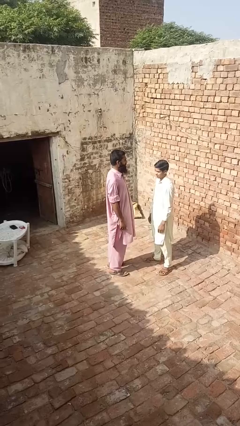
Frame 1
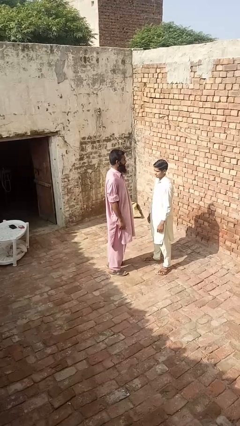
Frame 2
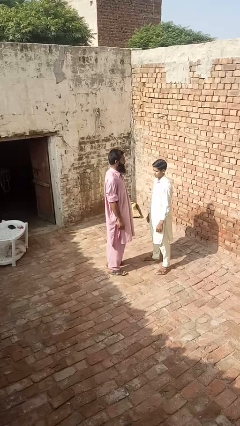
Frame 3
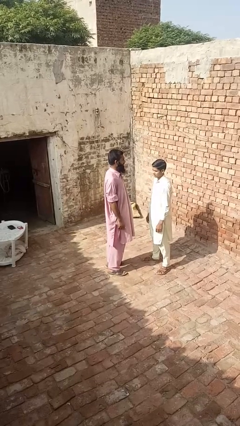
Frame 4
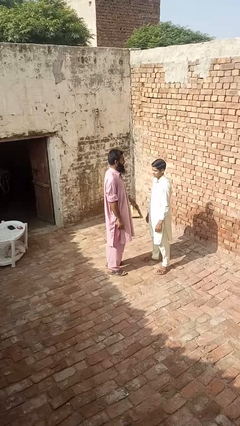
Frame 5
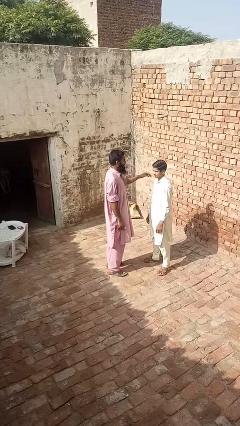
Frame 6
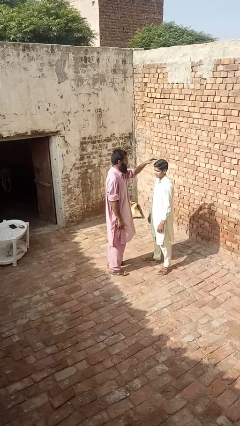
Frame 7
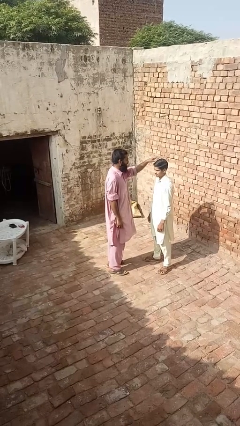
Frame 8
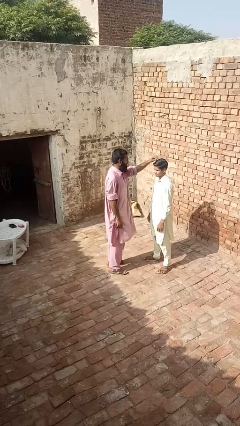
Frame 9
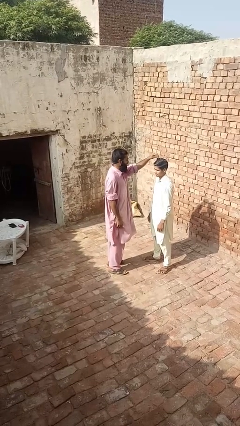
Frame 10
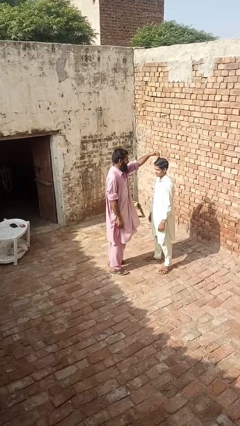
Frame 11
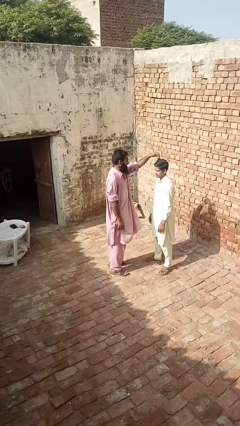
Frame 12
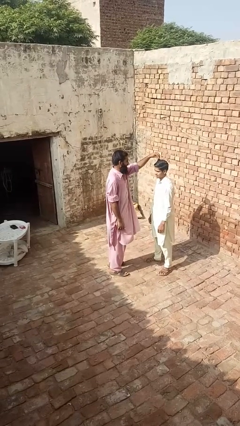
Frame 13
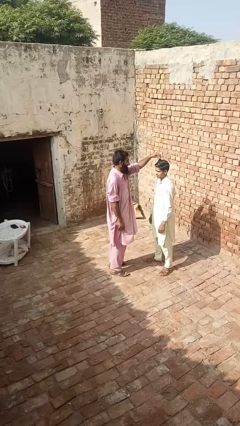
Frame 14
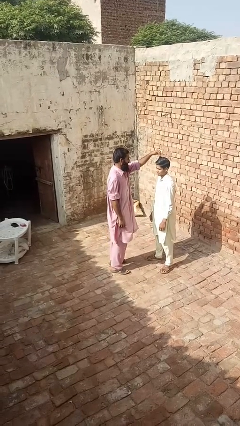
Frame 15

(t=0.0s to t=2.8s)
person grabs person by hair

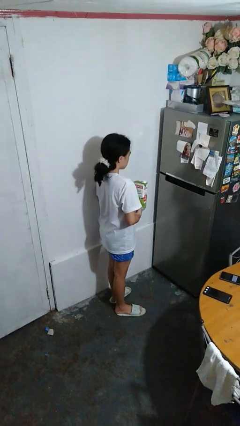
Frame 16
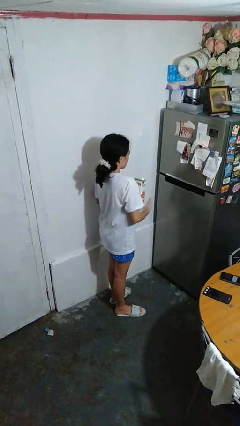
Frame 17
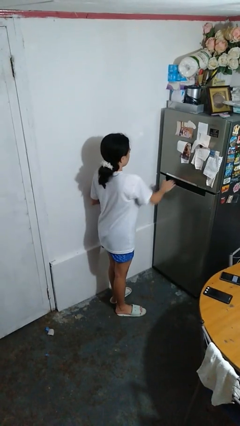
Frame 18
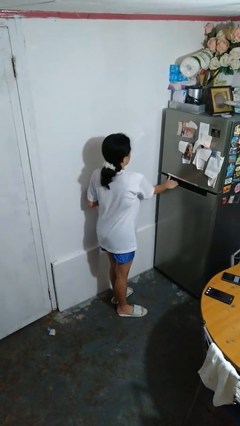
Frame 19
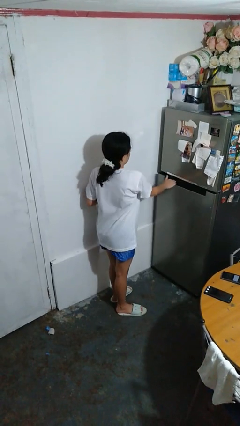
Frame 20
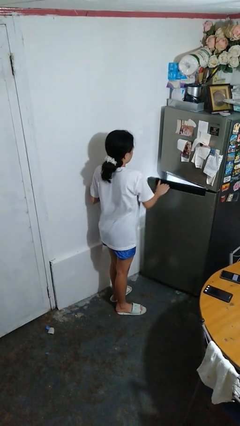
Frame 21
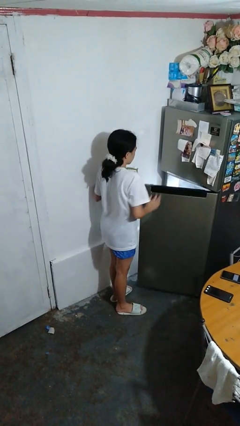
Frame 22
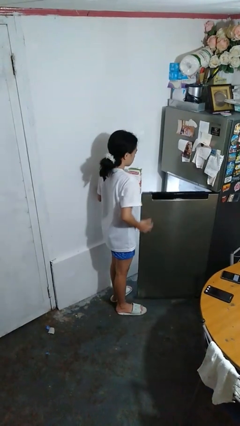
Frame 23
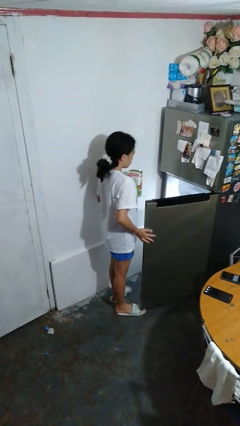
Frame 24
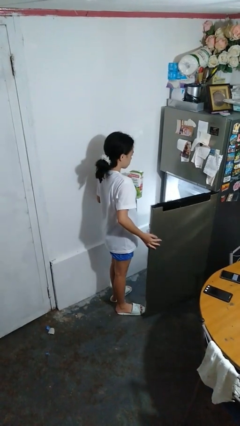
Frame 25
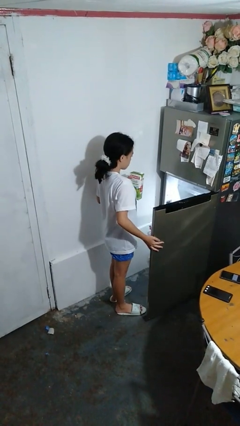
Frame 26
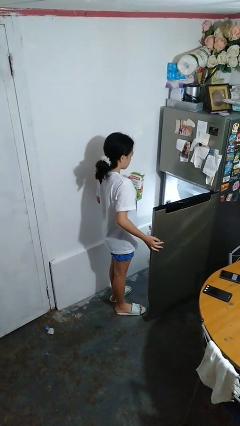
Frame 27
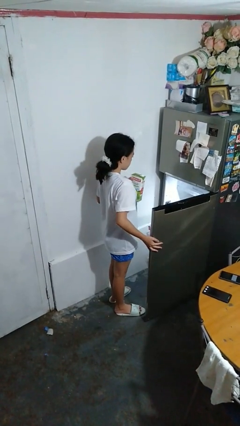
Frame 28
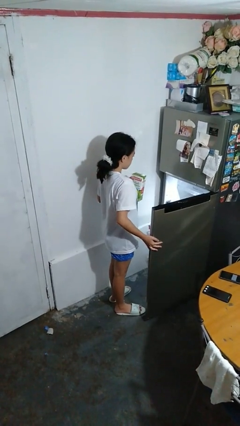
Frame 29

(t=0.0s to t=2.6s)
person opens refrigerator

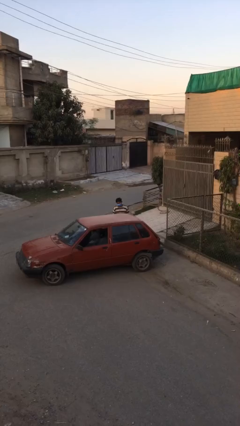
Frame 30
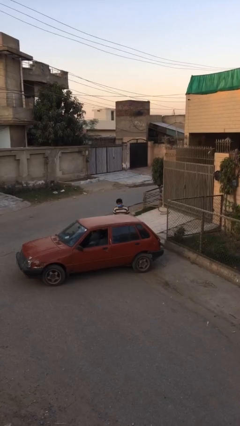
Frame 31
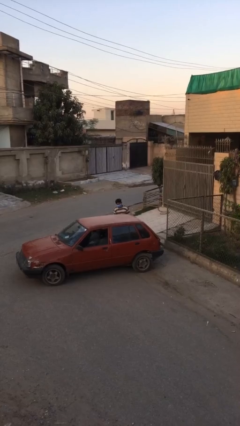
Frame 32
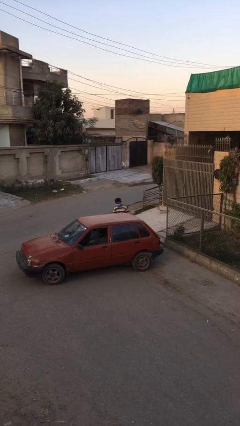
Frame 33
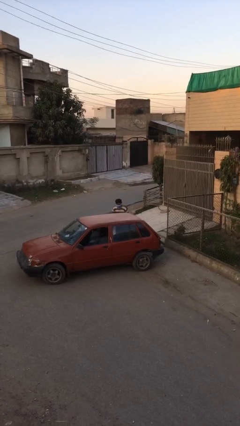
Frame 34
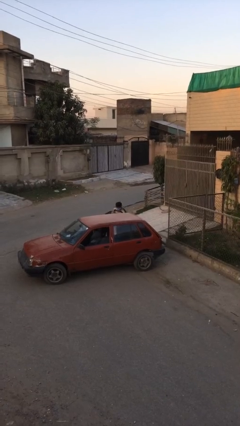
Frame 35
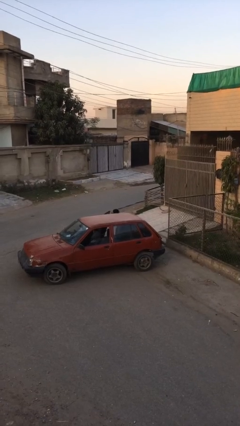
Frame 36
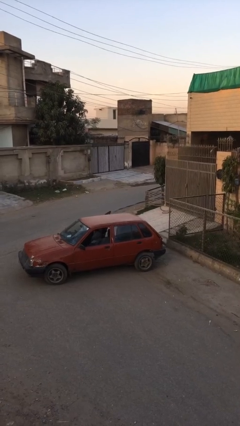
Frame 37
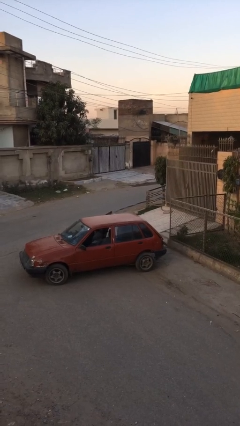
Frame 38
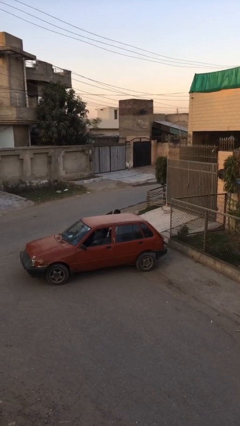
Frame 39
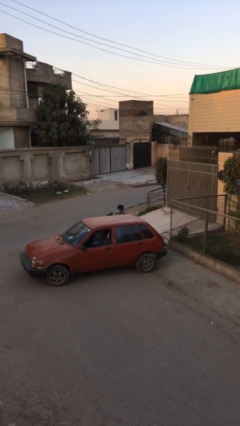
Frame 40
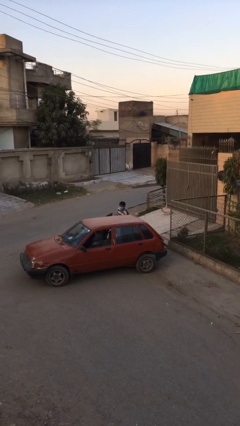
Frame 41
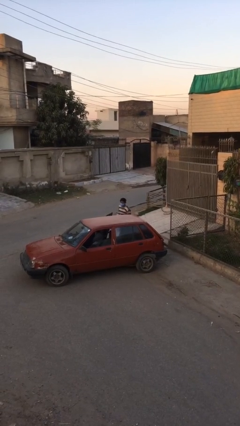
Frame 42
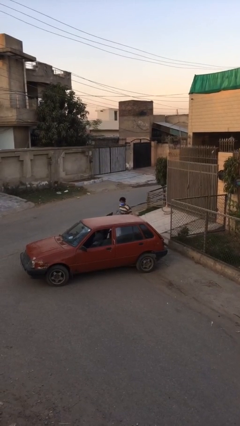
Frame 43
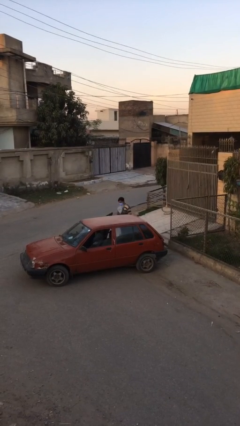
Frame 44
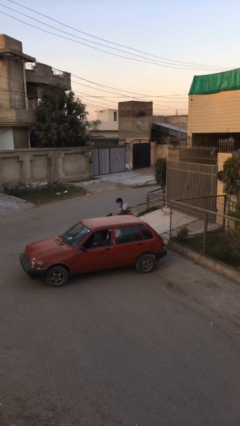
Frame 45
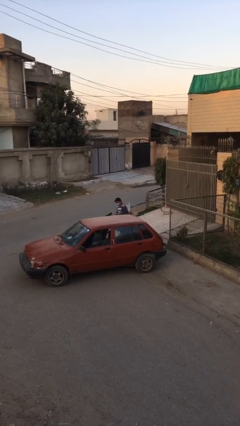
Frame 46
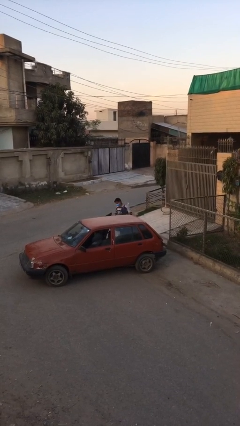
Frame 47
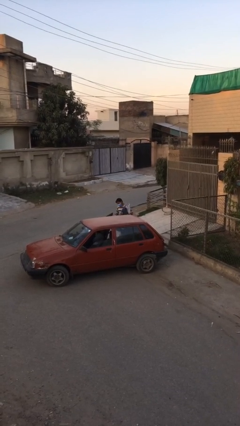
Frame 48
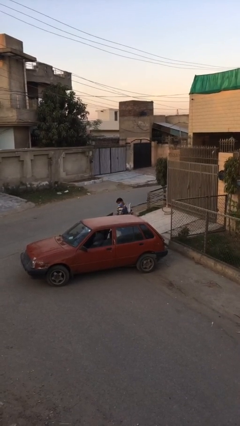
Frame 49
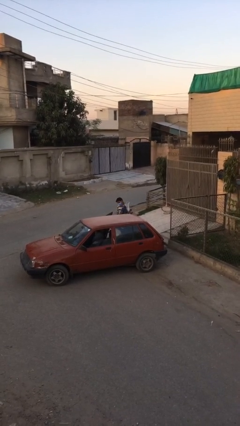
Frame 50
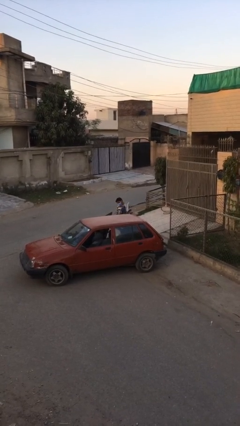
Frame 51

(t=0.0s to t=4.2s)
person unloads car

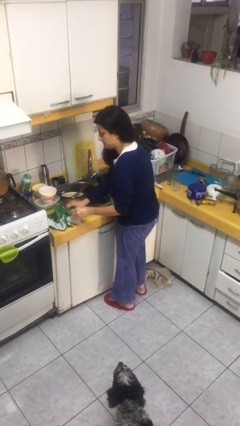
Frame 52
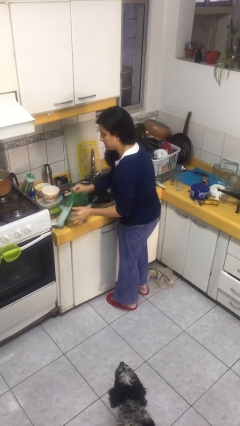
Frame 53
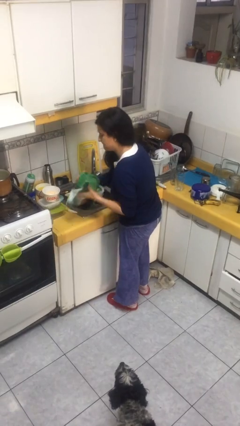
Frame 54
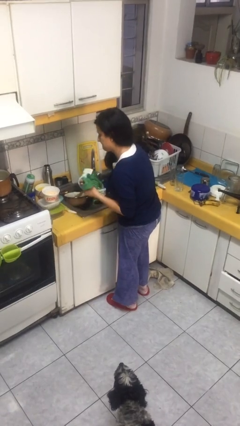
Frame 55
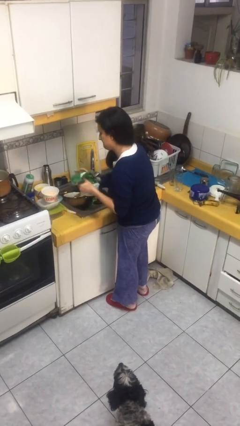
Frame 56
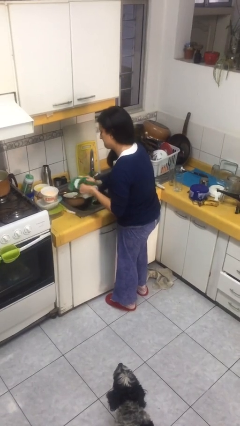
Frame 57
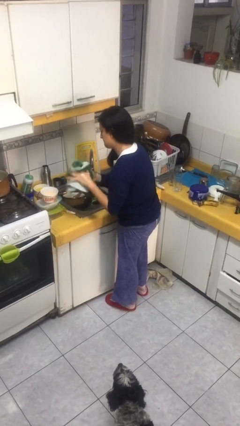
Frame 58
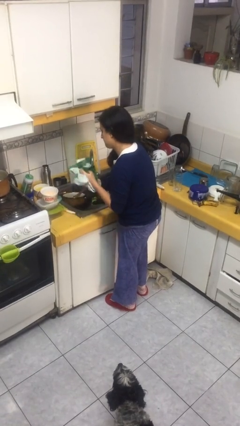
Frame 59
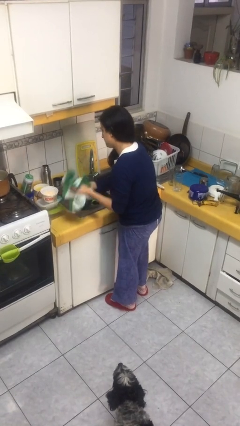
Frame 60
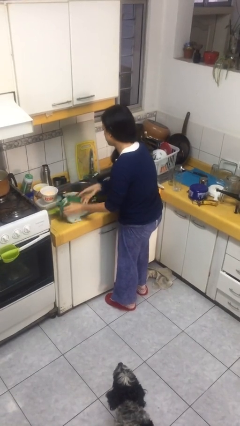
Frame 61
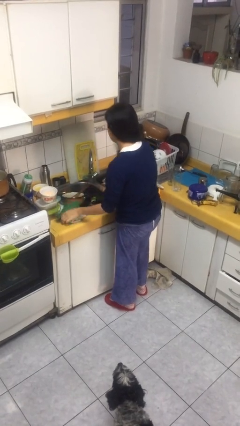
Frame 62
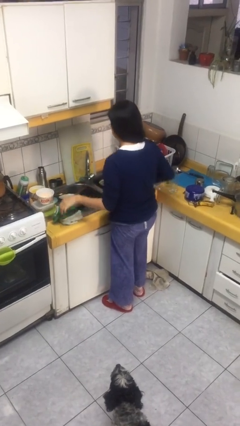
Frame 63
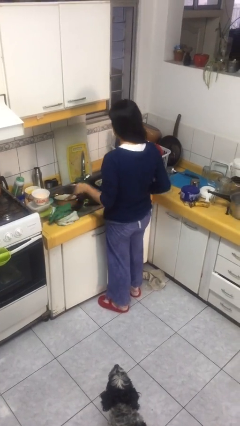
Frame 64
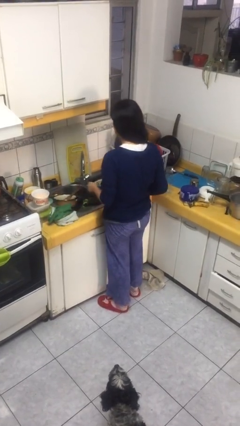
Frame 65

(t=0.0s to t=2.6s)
person dries hands with towel

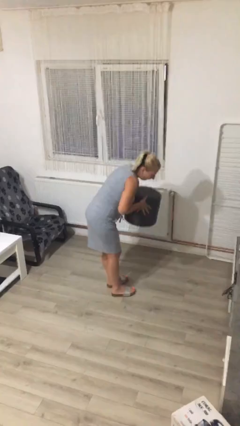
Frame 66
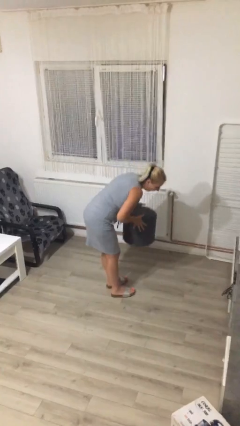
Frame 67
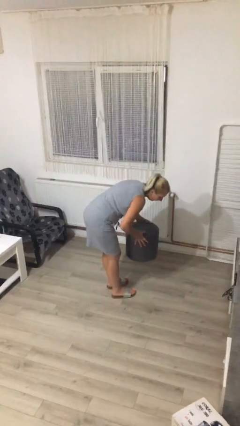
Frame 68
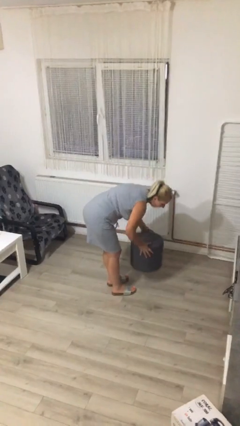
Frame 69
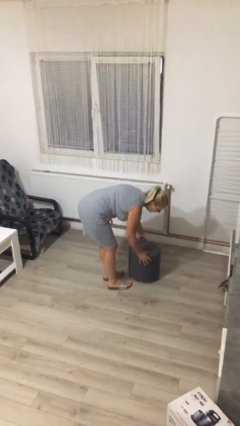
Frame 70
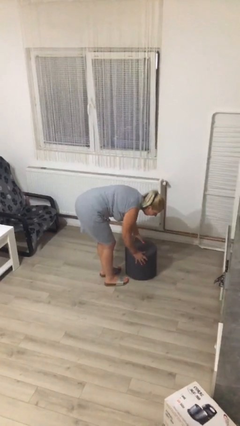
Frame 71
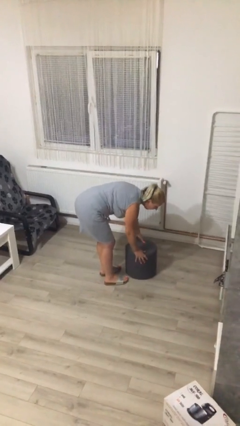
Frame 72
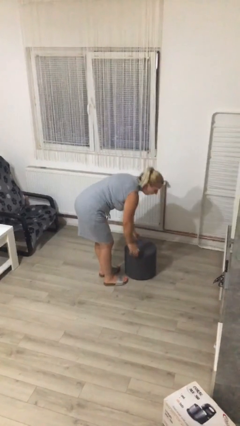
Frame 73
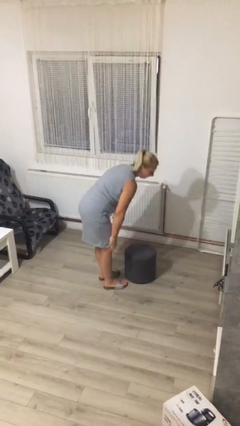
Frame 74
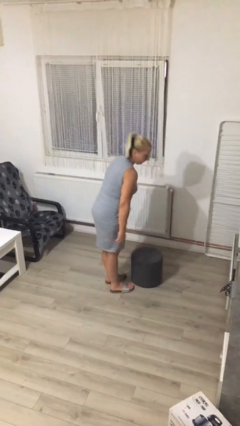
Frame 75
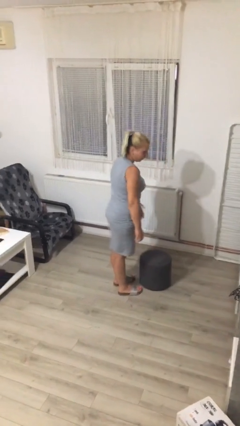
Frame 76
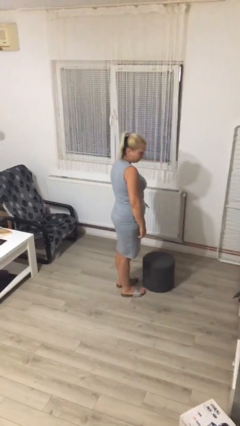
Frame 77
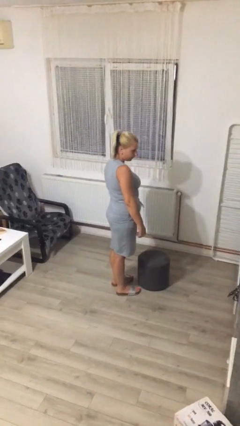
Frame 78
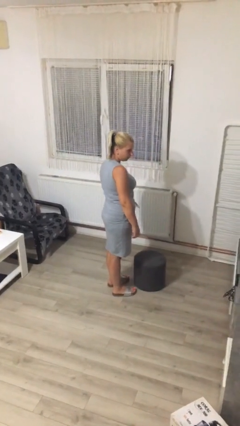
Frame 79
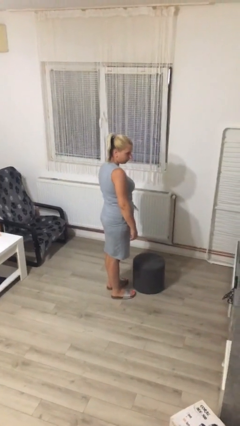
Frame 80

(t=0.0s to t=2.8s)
person puts down object on floor

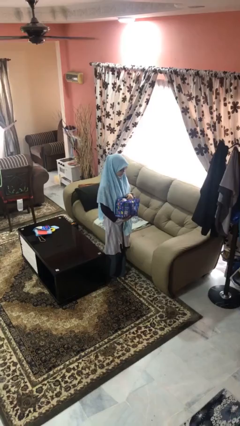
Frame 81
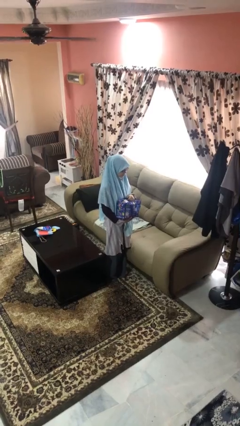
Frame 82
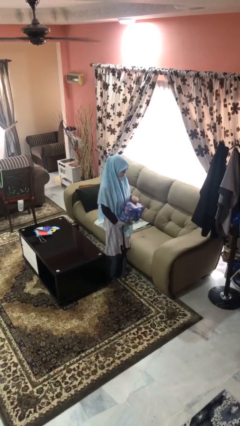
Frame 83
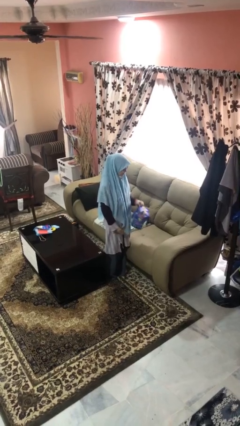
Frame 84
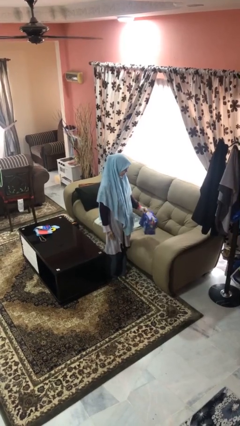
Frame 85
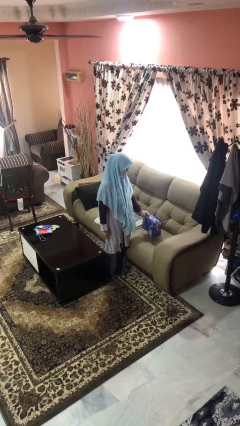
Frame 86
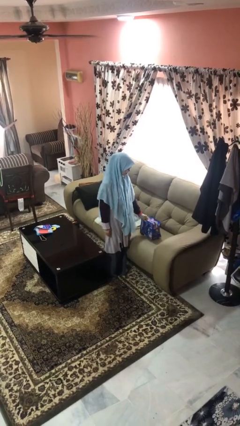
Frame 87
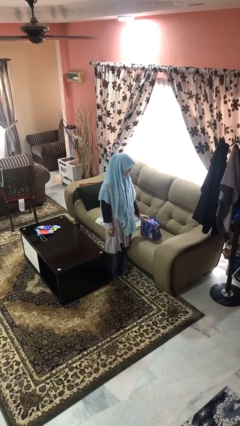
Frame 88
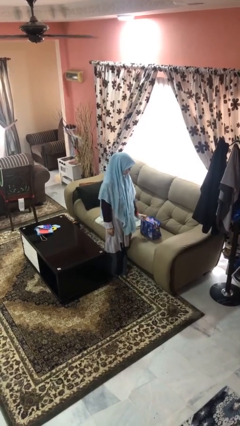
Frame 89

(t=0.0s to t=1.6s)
person puts down object on couch

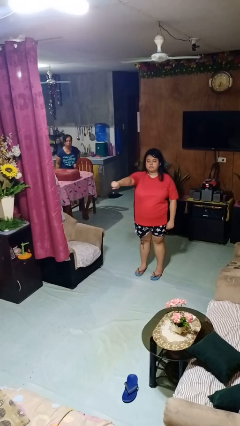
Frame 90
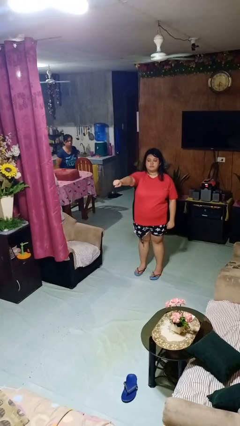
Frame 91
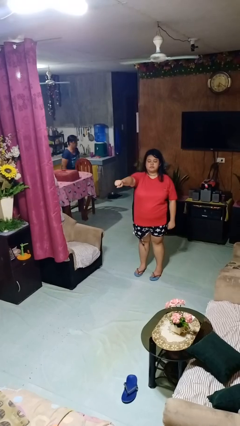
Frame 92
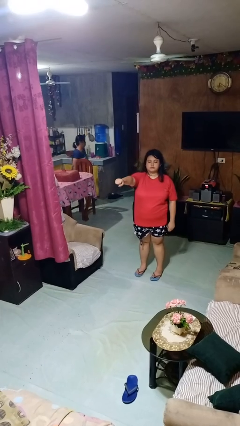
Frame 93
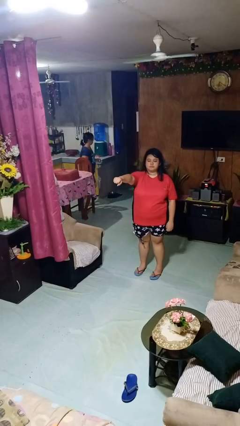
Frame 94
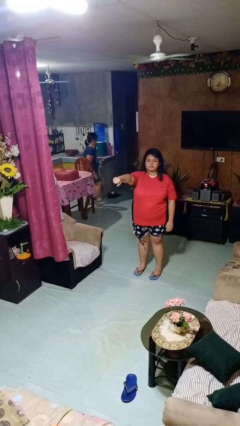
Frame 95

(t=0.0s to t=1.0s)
person punches
